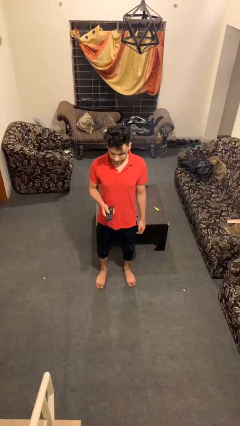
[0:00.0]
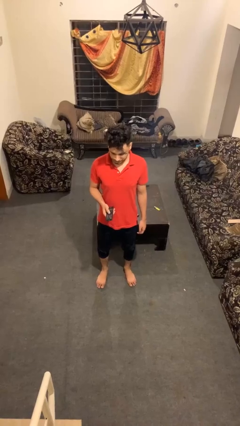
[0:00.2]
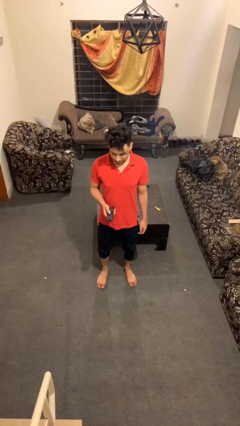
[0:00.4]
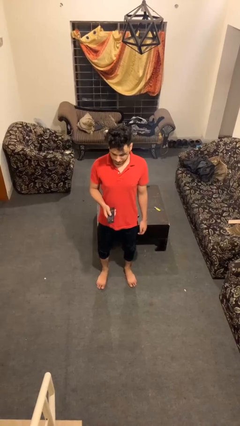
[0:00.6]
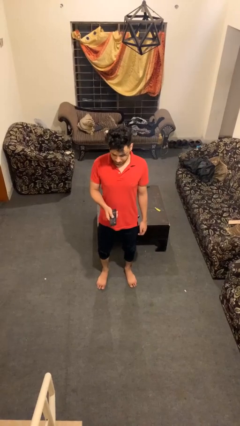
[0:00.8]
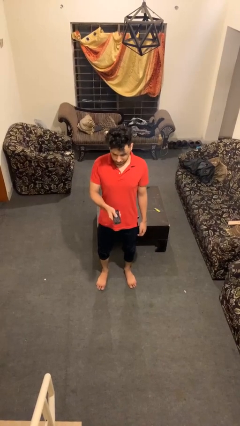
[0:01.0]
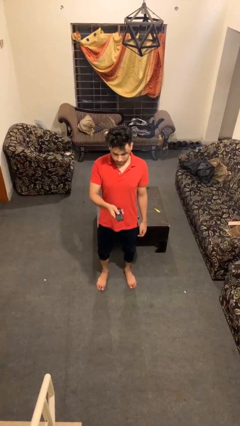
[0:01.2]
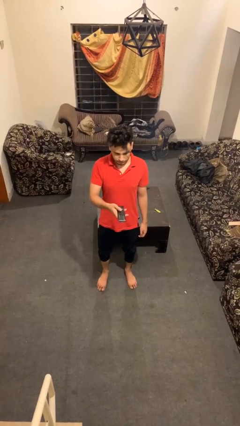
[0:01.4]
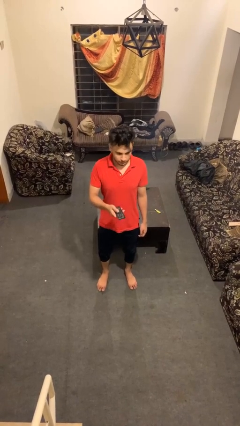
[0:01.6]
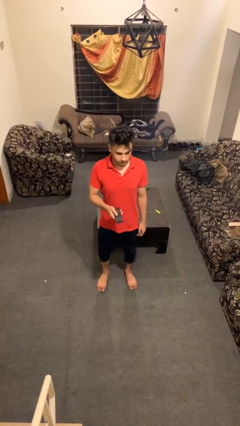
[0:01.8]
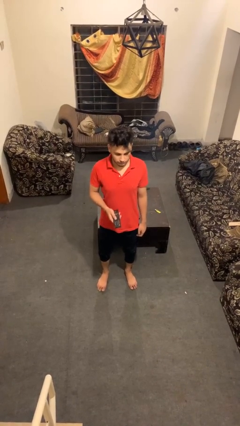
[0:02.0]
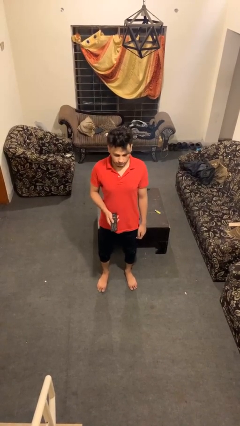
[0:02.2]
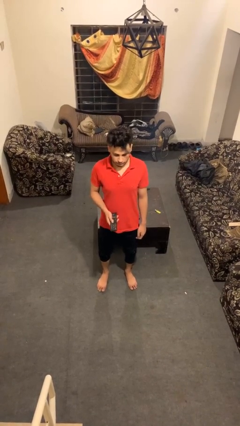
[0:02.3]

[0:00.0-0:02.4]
person uses television remote

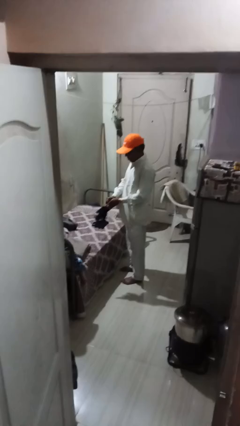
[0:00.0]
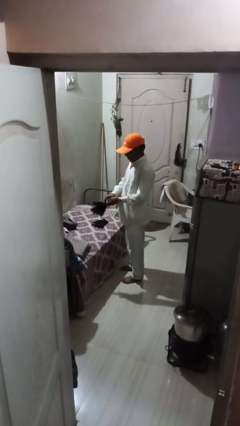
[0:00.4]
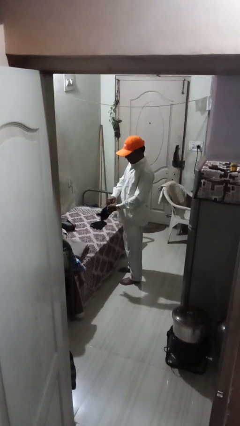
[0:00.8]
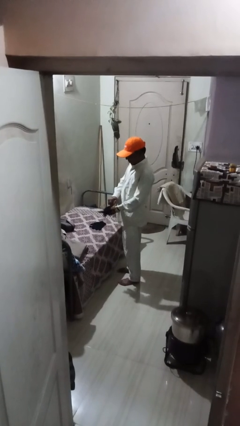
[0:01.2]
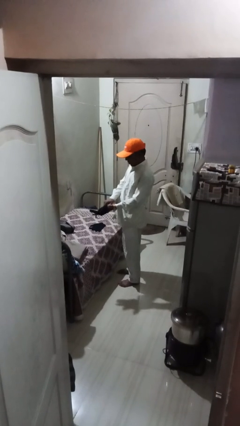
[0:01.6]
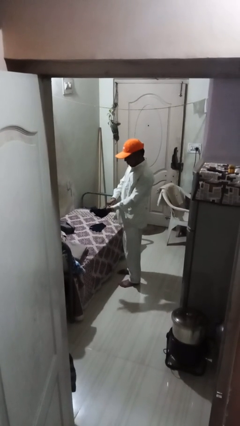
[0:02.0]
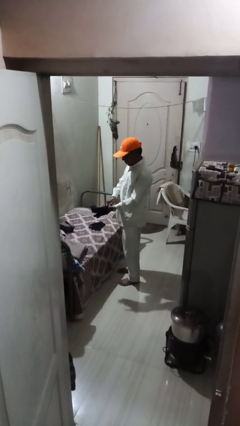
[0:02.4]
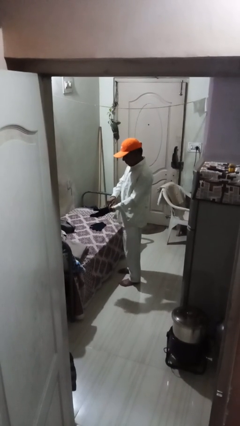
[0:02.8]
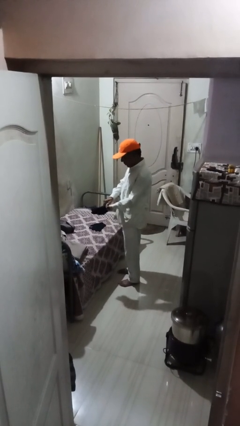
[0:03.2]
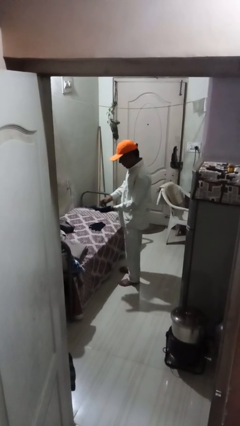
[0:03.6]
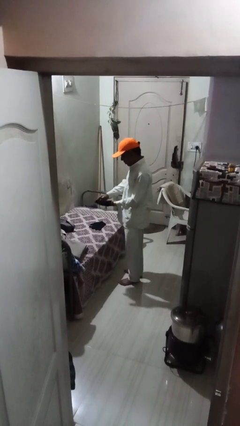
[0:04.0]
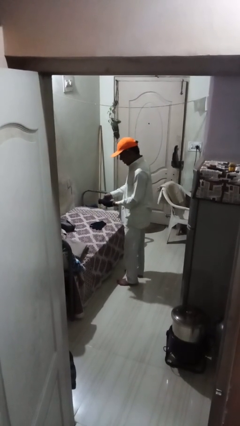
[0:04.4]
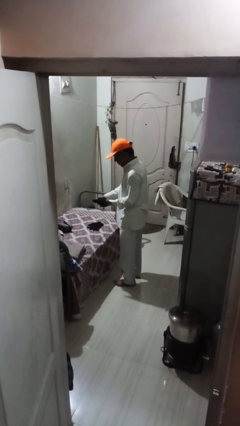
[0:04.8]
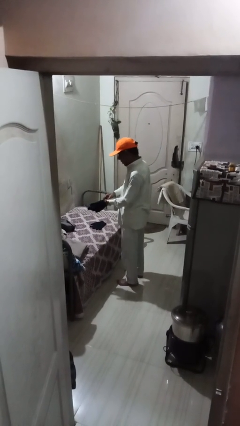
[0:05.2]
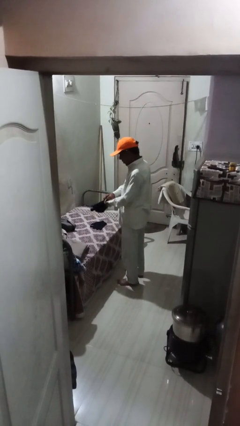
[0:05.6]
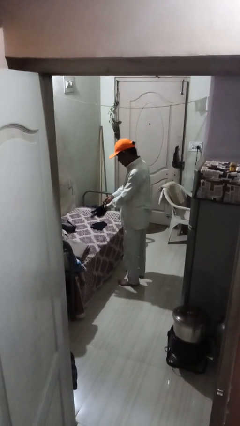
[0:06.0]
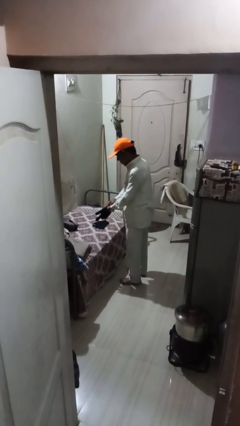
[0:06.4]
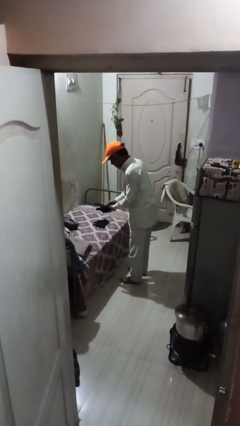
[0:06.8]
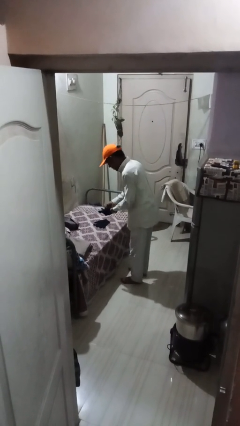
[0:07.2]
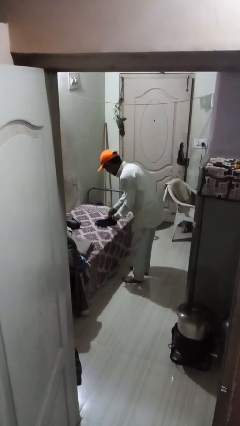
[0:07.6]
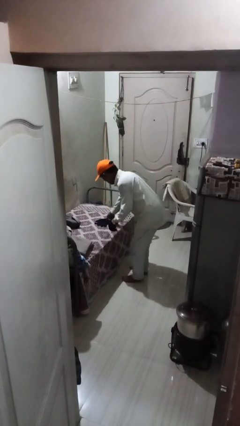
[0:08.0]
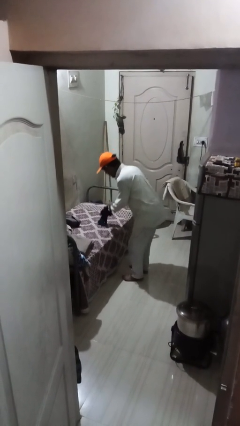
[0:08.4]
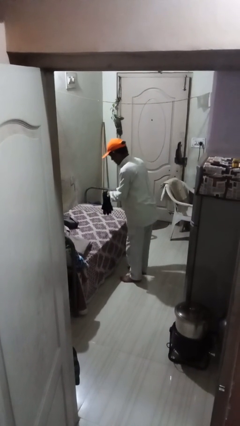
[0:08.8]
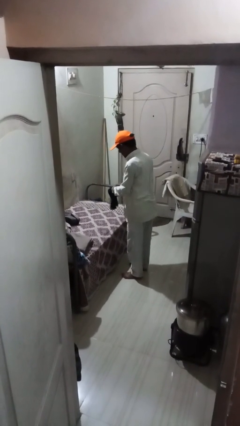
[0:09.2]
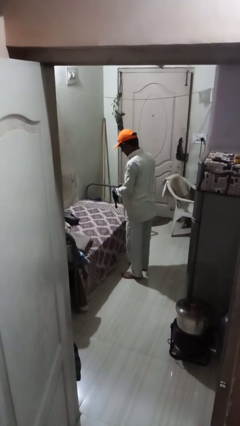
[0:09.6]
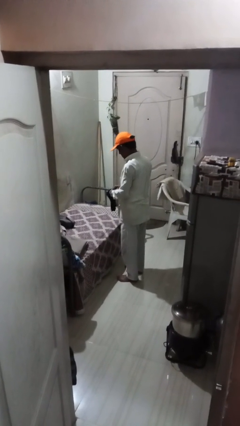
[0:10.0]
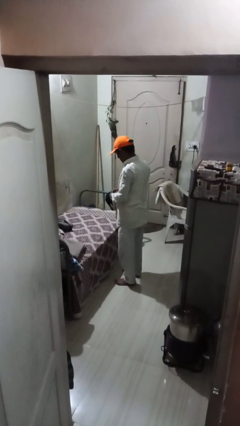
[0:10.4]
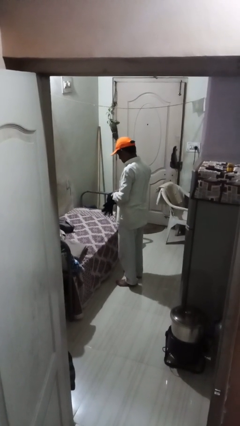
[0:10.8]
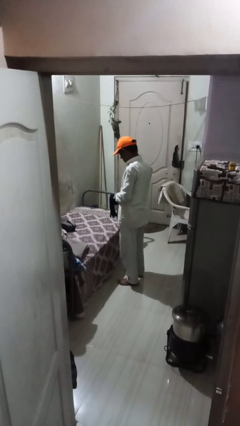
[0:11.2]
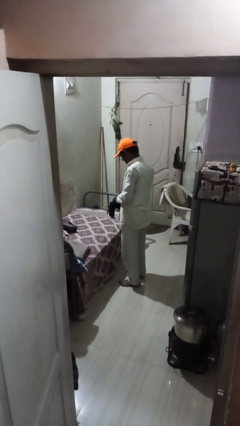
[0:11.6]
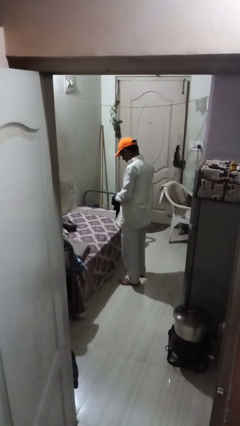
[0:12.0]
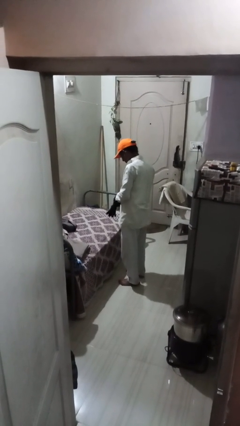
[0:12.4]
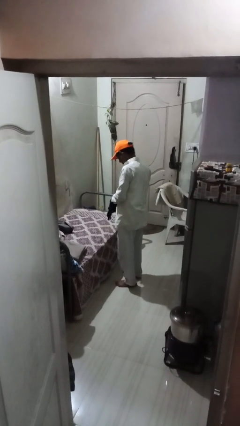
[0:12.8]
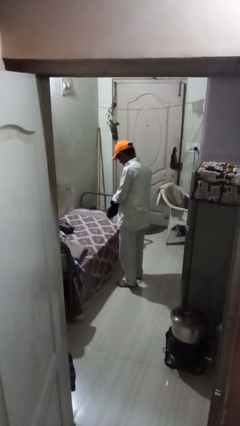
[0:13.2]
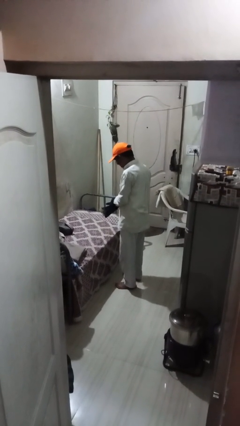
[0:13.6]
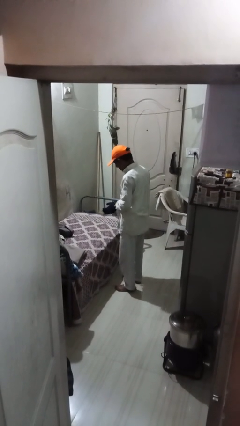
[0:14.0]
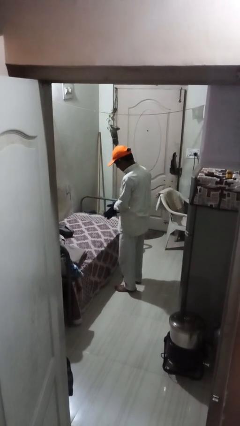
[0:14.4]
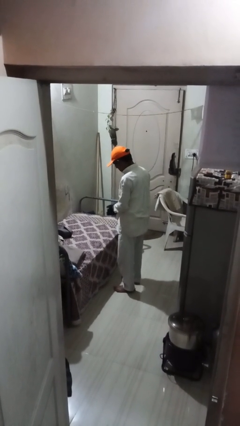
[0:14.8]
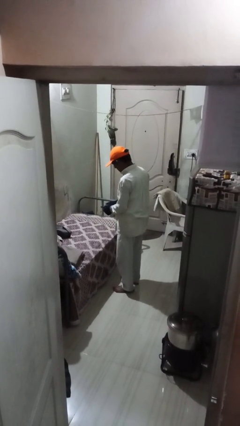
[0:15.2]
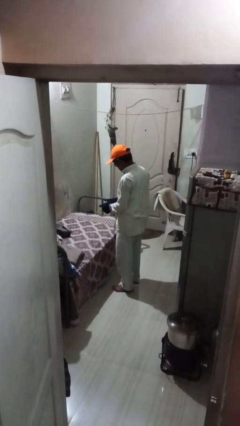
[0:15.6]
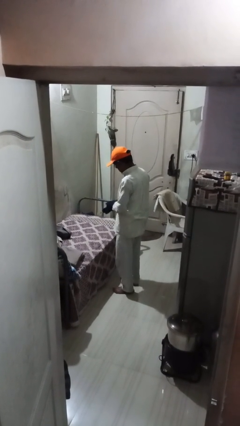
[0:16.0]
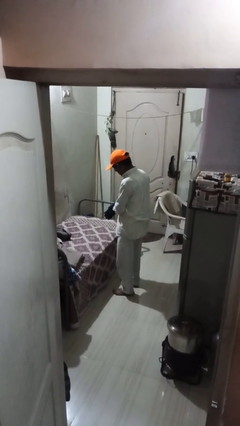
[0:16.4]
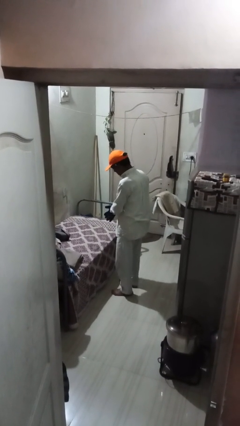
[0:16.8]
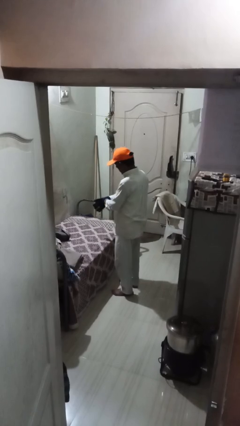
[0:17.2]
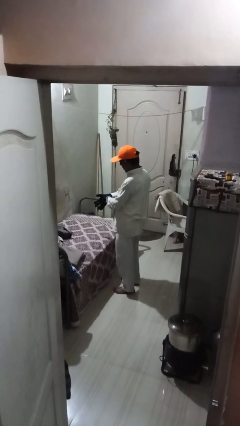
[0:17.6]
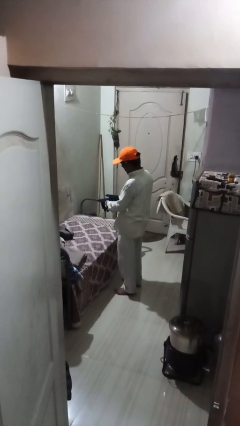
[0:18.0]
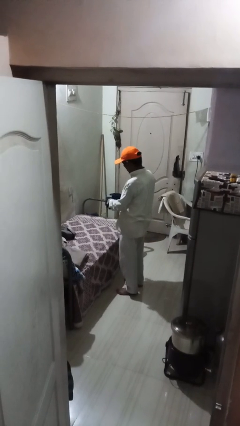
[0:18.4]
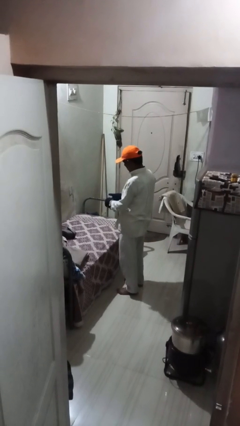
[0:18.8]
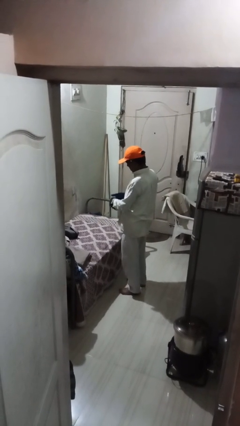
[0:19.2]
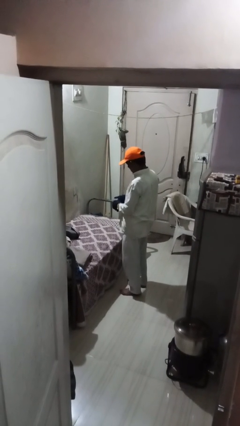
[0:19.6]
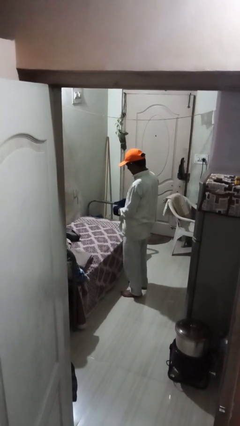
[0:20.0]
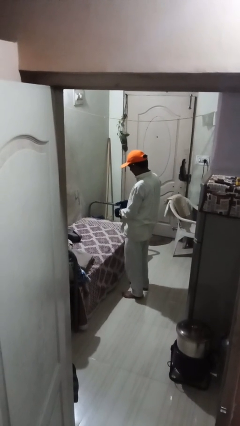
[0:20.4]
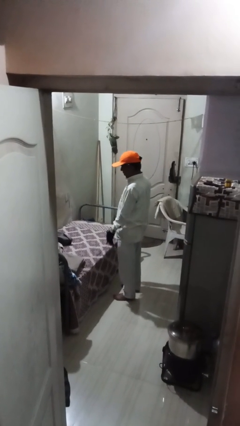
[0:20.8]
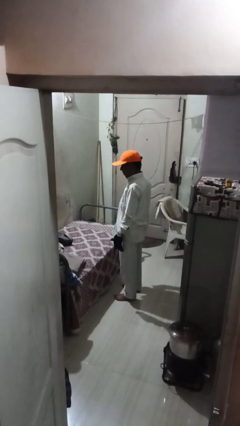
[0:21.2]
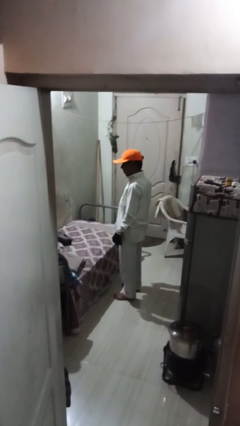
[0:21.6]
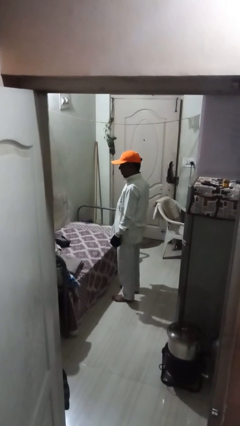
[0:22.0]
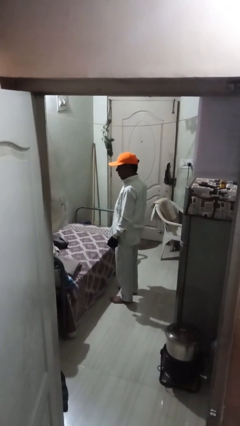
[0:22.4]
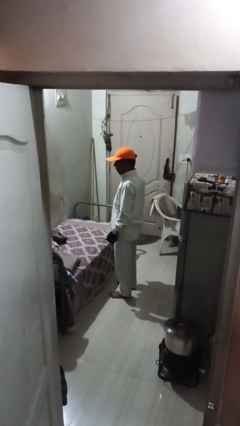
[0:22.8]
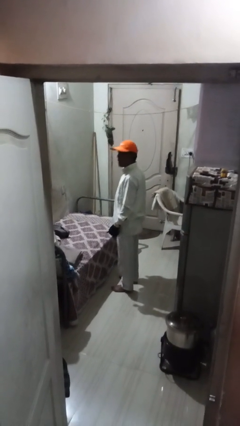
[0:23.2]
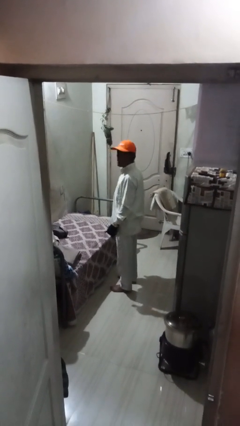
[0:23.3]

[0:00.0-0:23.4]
person puts on gloves

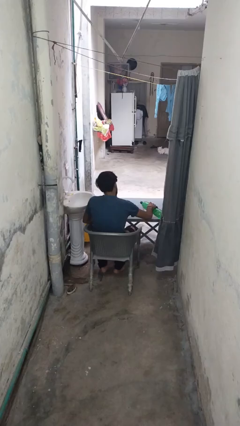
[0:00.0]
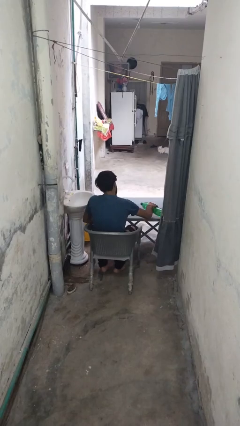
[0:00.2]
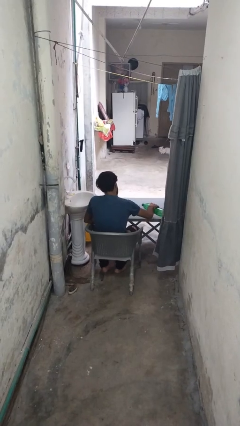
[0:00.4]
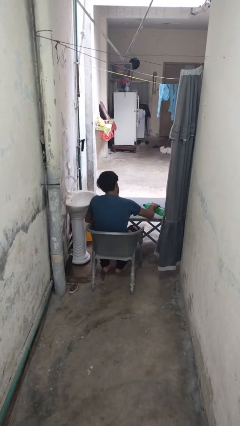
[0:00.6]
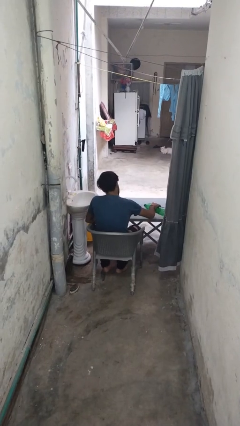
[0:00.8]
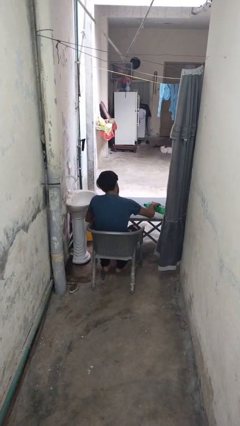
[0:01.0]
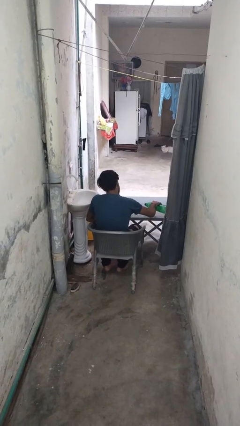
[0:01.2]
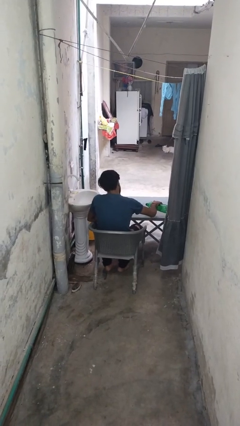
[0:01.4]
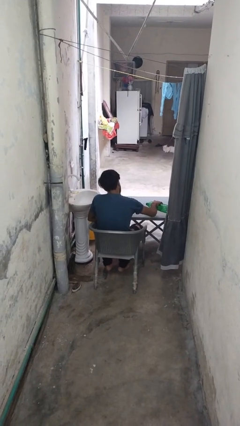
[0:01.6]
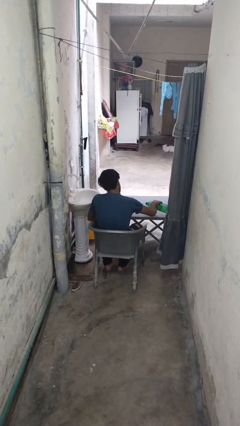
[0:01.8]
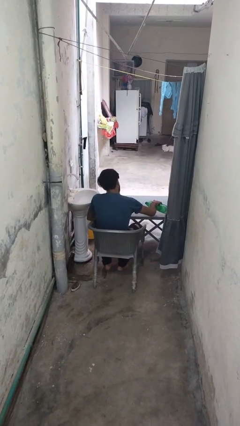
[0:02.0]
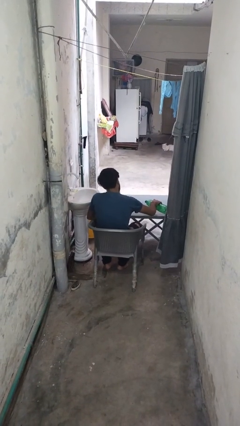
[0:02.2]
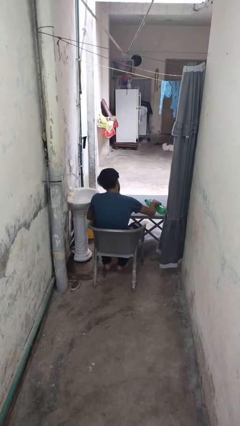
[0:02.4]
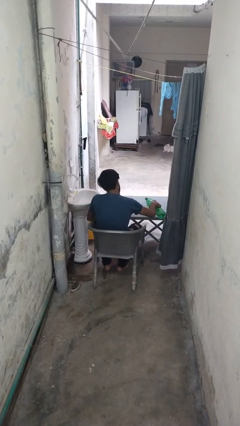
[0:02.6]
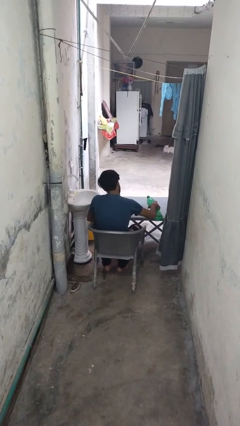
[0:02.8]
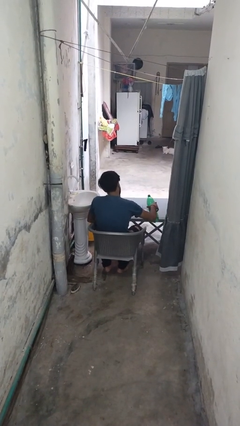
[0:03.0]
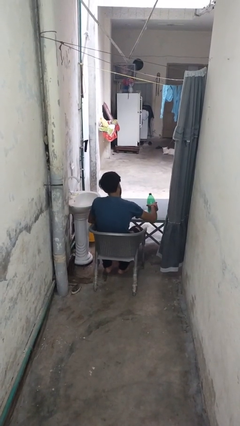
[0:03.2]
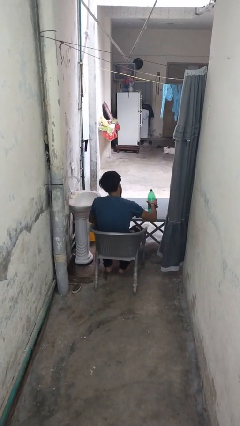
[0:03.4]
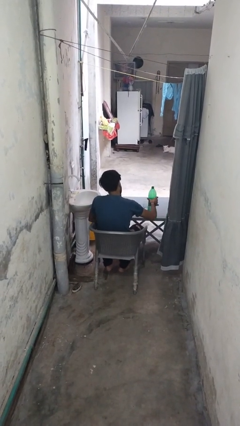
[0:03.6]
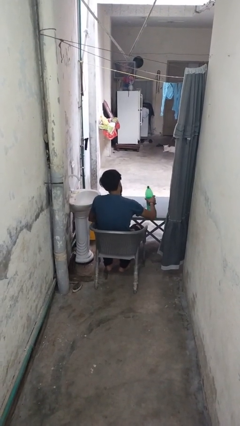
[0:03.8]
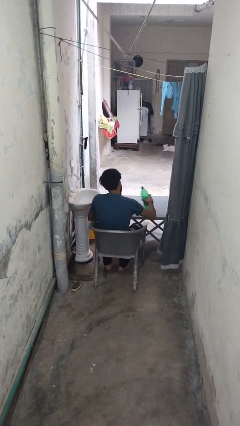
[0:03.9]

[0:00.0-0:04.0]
person pours liquid into cup

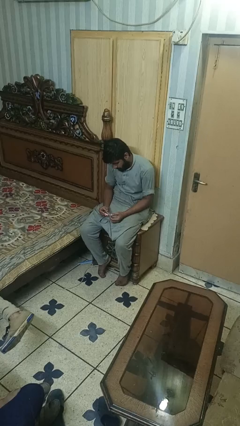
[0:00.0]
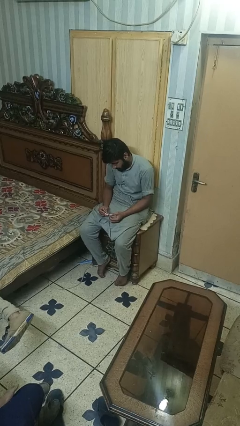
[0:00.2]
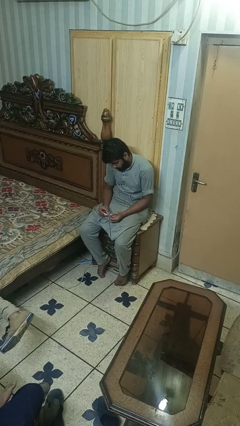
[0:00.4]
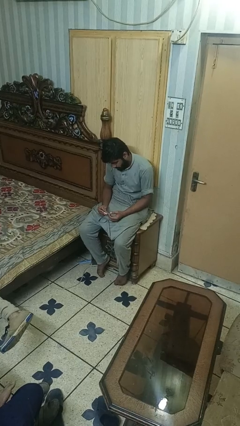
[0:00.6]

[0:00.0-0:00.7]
person clips fingernails
